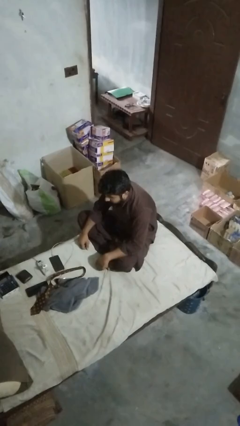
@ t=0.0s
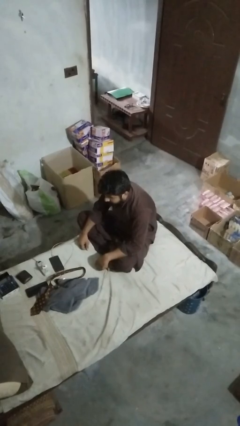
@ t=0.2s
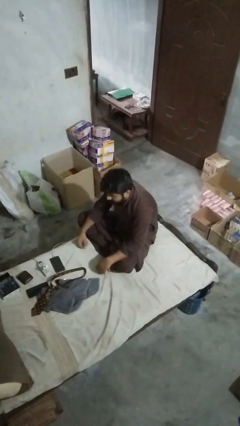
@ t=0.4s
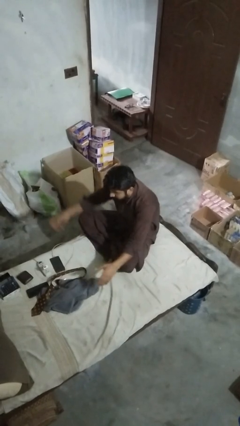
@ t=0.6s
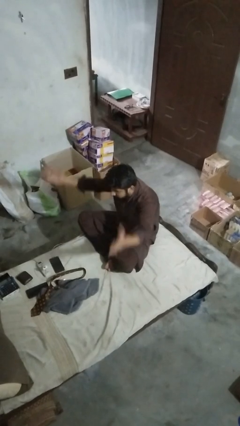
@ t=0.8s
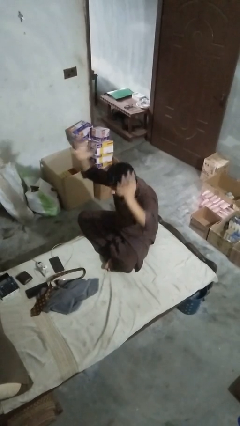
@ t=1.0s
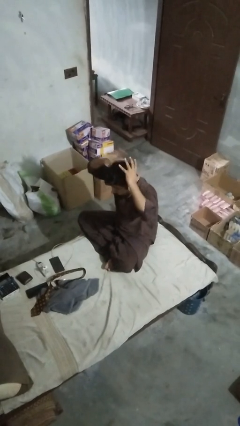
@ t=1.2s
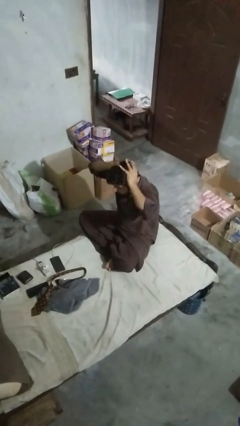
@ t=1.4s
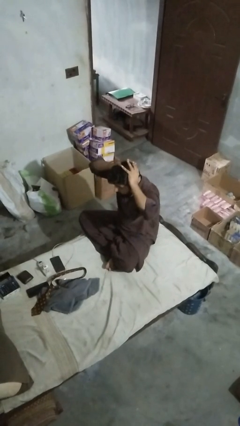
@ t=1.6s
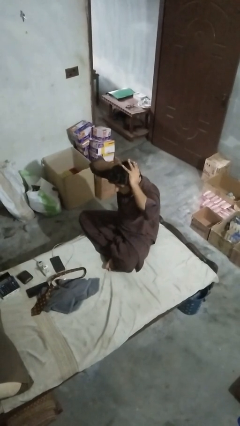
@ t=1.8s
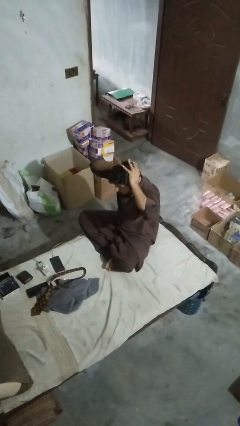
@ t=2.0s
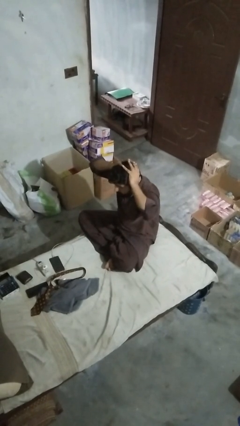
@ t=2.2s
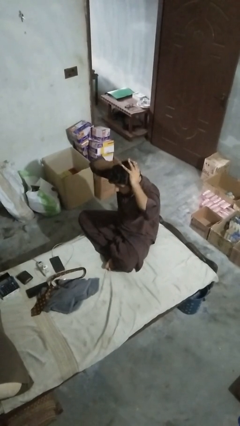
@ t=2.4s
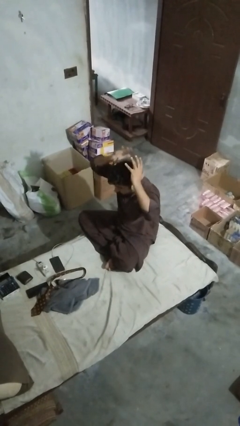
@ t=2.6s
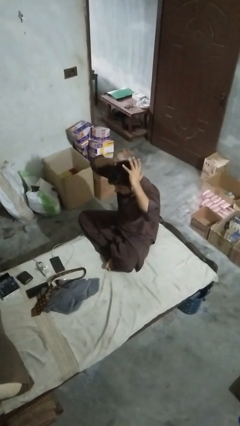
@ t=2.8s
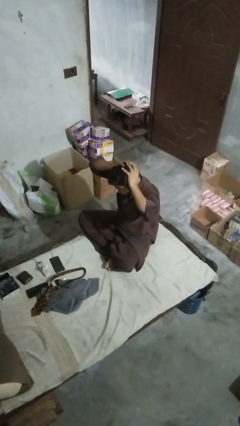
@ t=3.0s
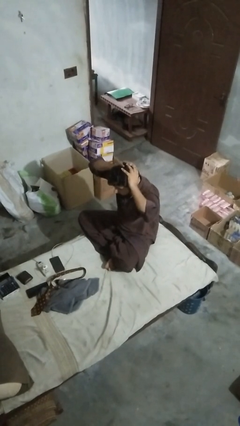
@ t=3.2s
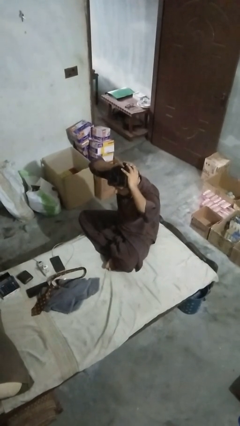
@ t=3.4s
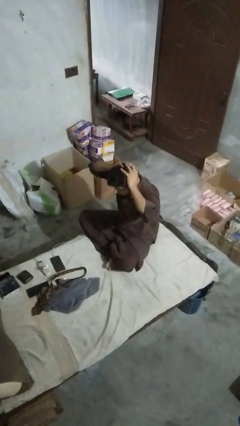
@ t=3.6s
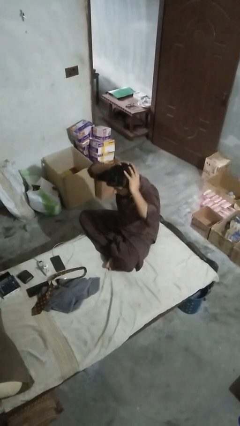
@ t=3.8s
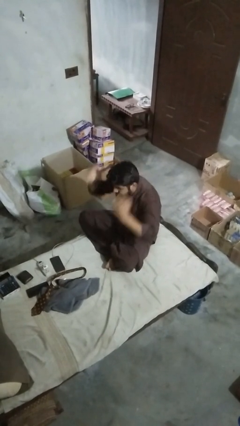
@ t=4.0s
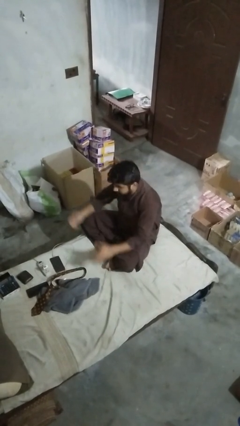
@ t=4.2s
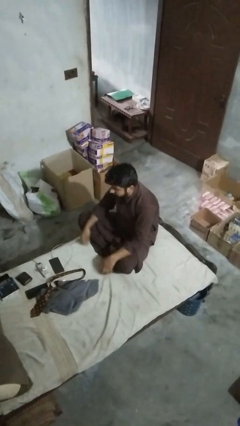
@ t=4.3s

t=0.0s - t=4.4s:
person pats head

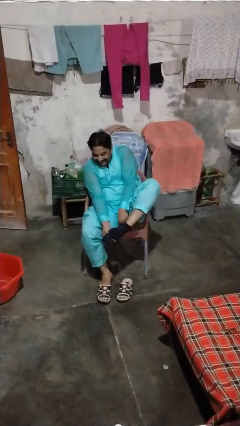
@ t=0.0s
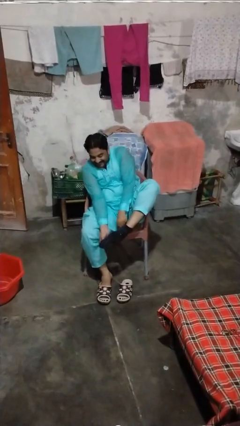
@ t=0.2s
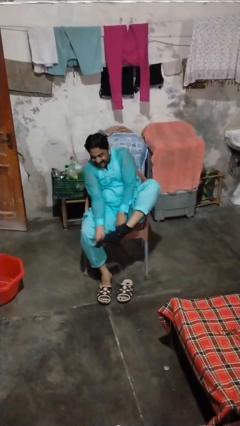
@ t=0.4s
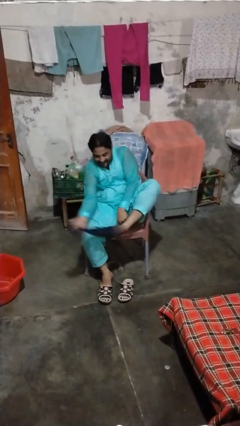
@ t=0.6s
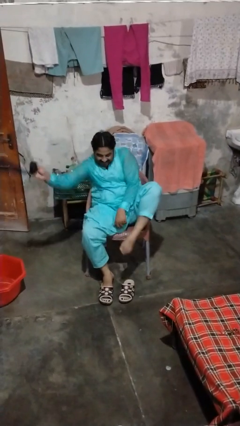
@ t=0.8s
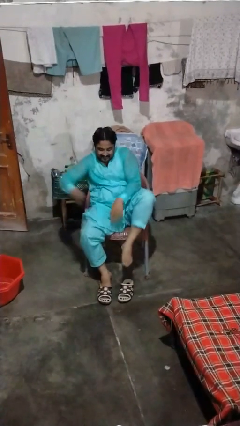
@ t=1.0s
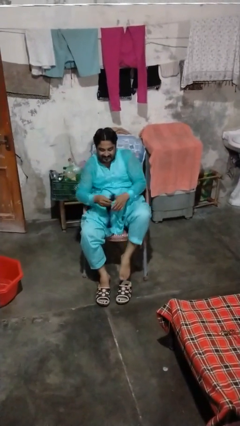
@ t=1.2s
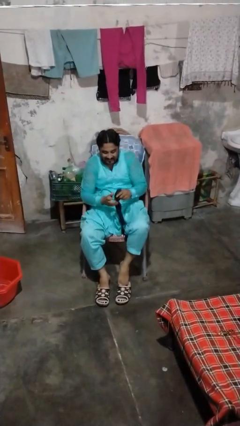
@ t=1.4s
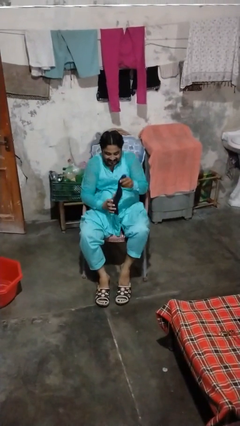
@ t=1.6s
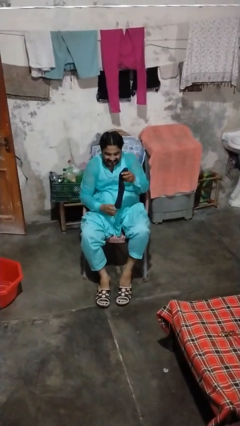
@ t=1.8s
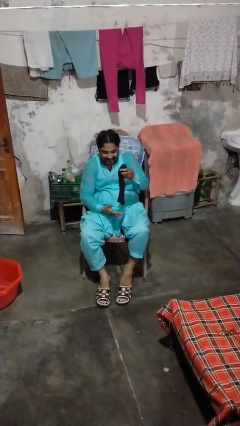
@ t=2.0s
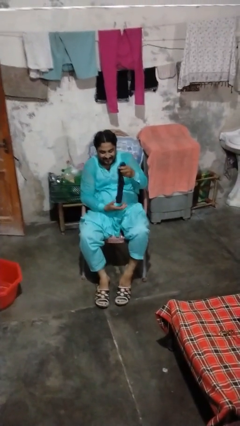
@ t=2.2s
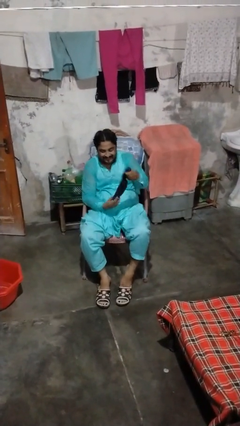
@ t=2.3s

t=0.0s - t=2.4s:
person takes off socks

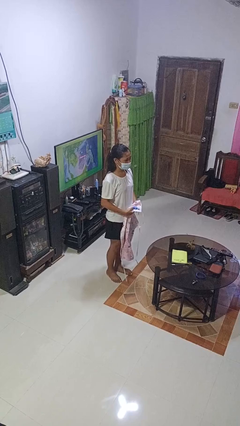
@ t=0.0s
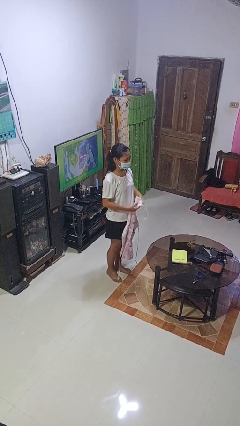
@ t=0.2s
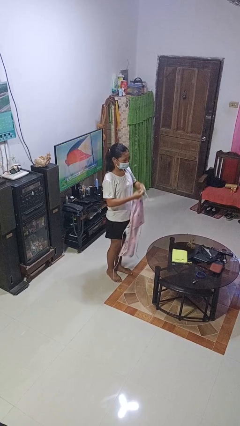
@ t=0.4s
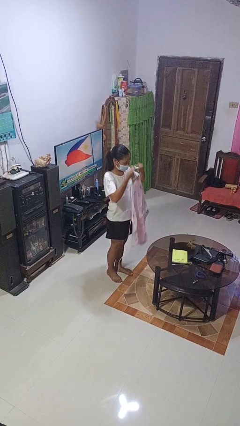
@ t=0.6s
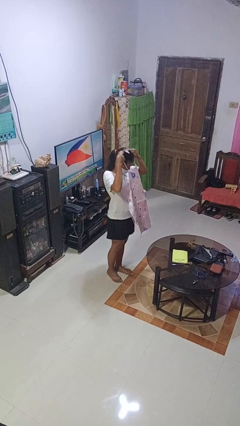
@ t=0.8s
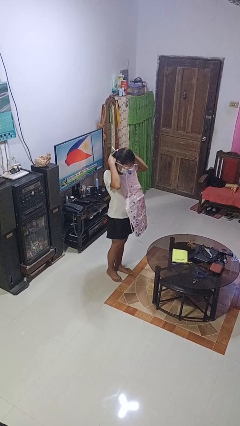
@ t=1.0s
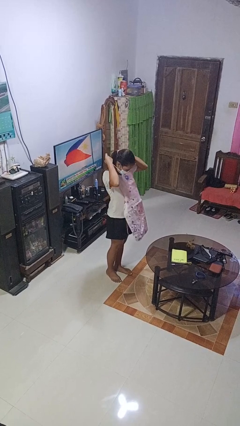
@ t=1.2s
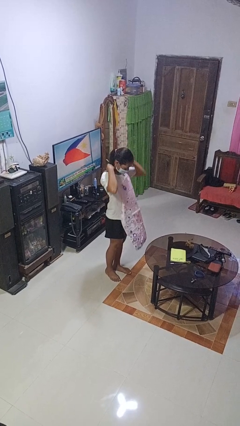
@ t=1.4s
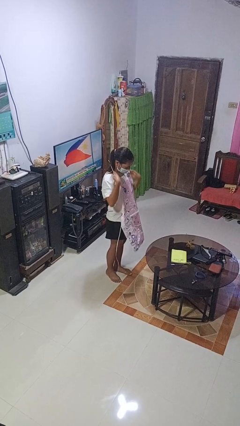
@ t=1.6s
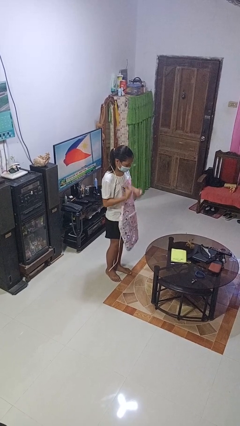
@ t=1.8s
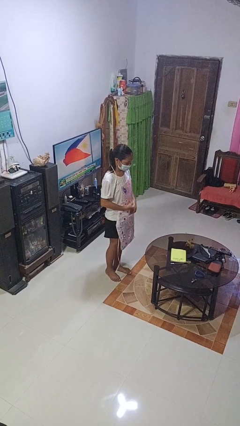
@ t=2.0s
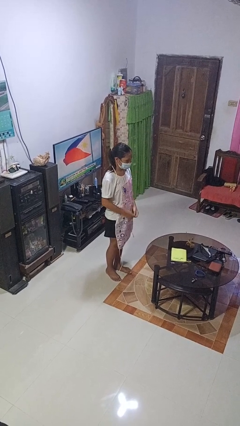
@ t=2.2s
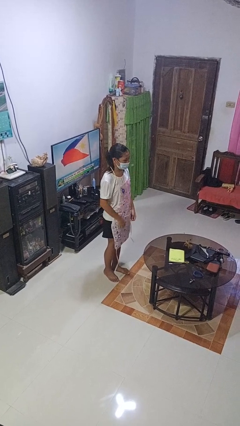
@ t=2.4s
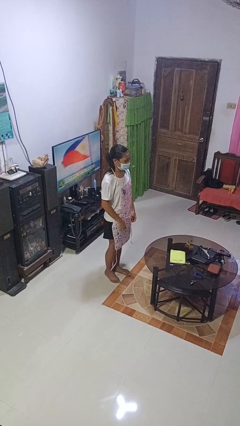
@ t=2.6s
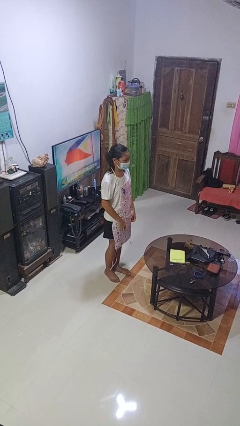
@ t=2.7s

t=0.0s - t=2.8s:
person puts on apron

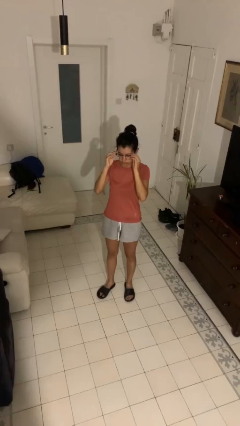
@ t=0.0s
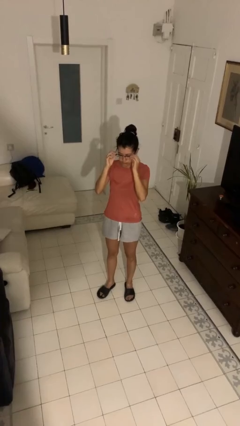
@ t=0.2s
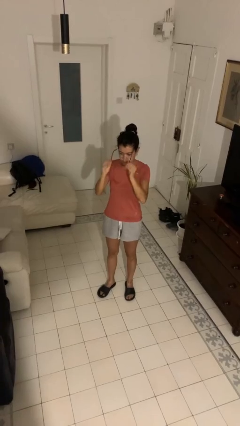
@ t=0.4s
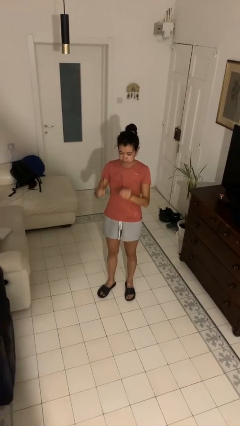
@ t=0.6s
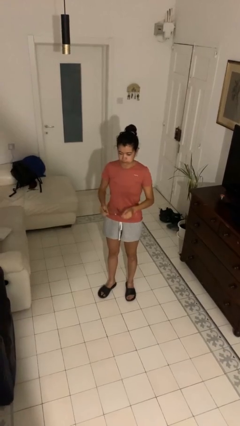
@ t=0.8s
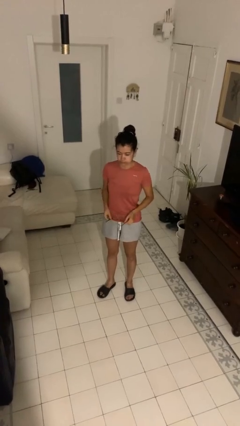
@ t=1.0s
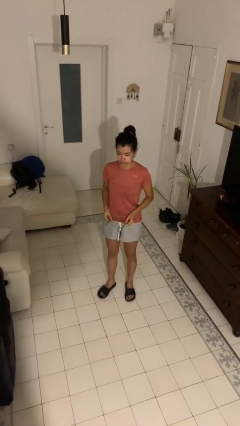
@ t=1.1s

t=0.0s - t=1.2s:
person takes off glasses

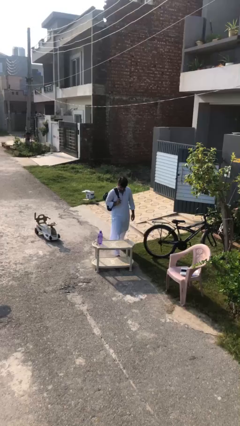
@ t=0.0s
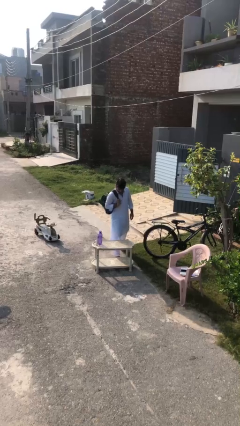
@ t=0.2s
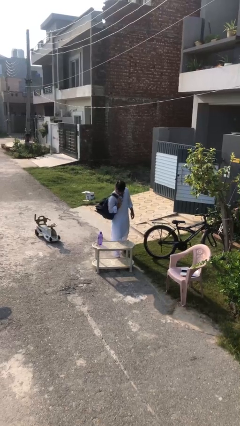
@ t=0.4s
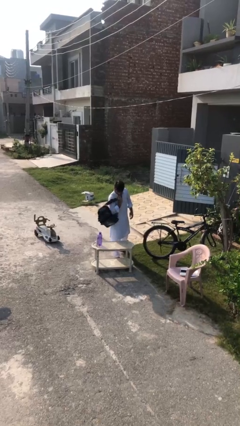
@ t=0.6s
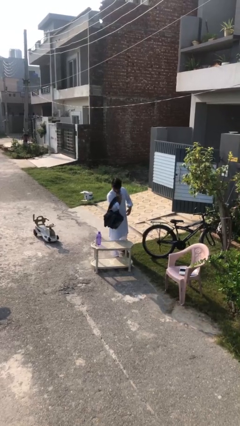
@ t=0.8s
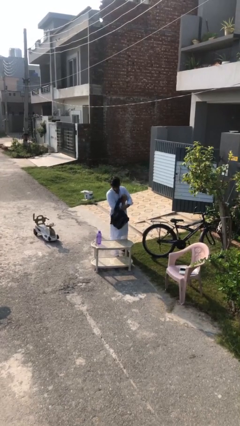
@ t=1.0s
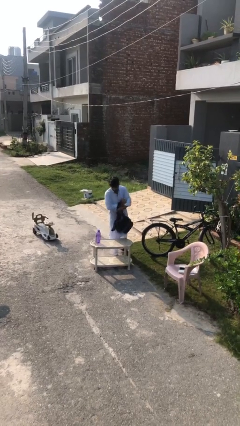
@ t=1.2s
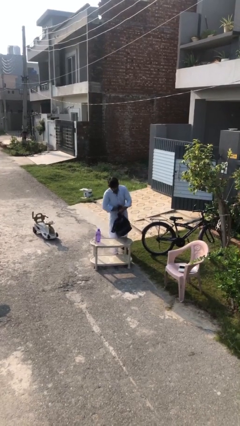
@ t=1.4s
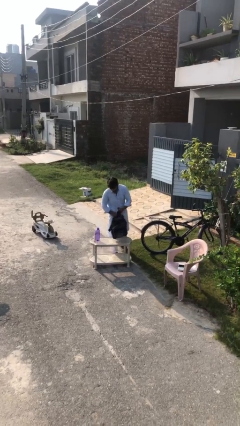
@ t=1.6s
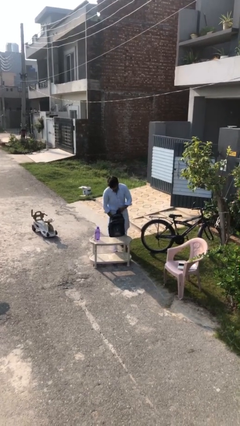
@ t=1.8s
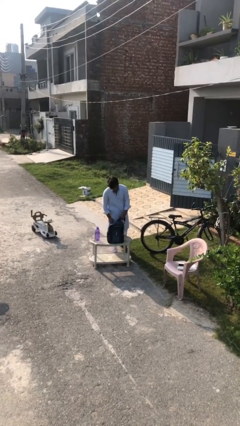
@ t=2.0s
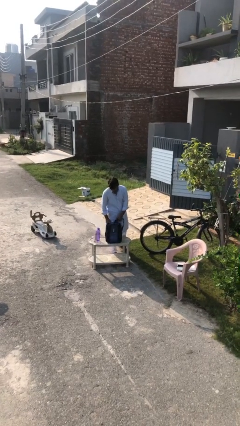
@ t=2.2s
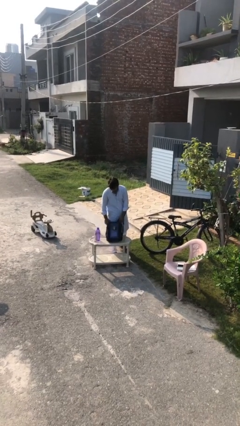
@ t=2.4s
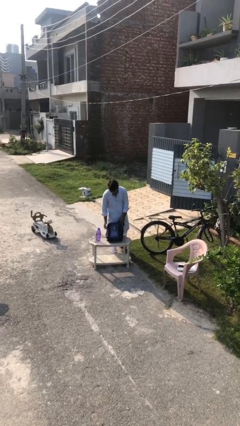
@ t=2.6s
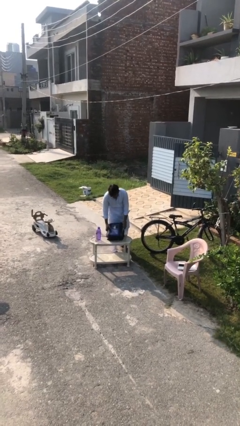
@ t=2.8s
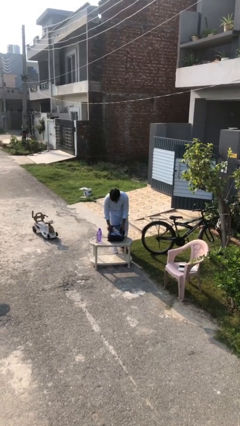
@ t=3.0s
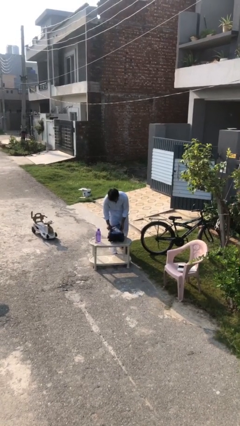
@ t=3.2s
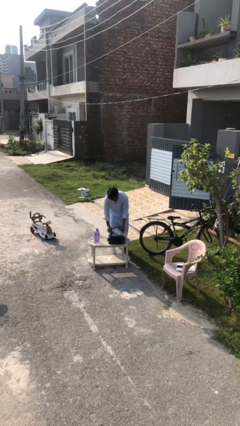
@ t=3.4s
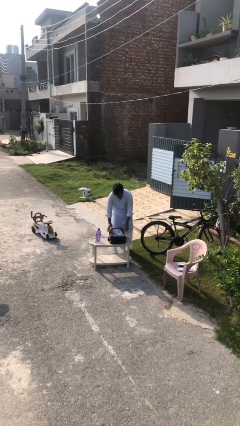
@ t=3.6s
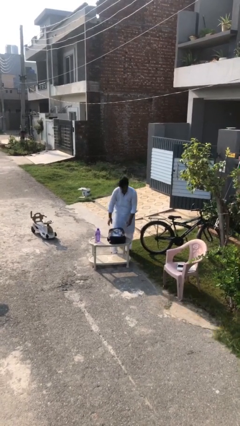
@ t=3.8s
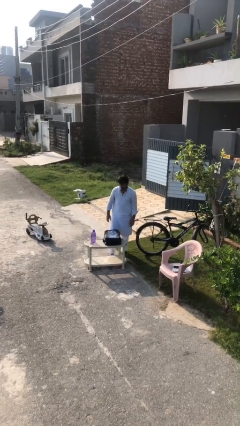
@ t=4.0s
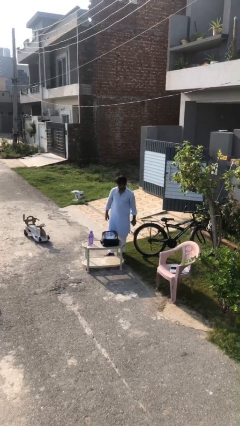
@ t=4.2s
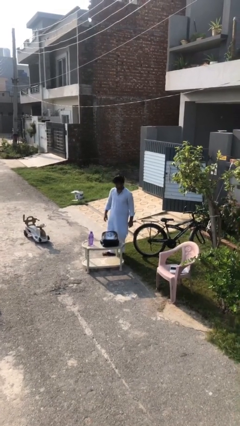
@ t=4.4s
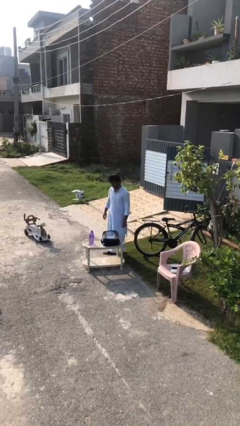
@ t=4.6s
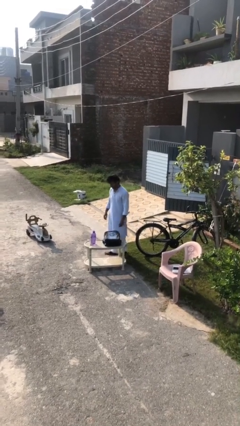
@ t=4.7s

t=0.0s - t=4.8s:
person puts down object on table

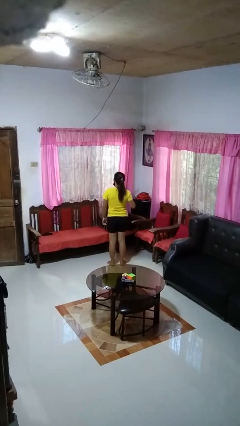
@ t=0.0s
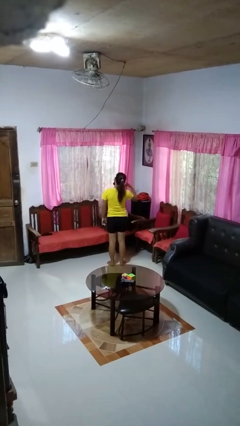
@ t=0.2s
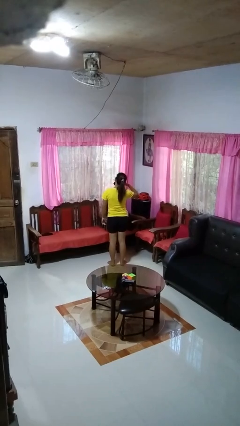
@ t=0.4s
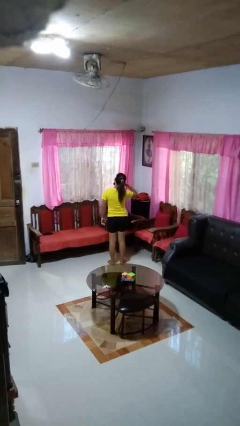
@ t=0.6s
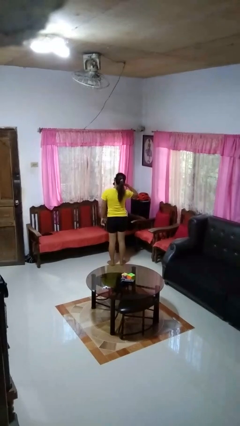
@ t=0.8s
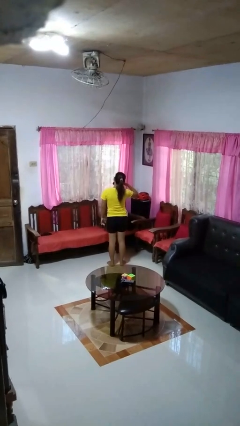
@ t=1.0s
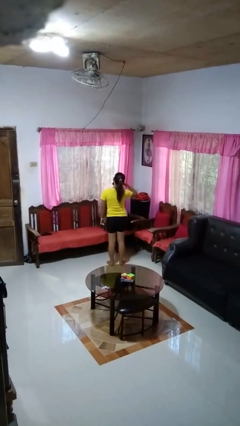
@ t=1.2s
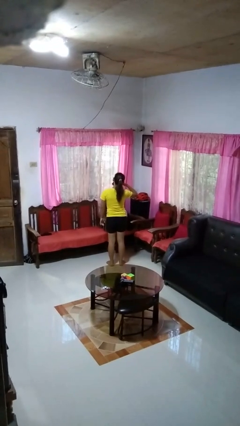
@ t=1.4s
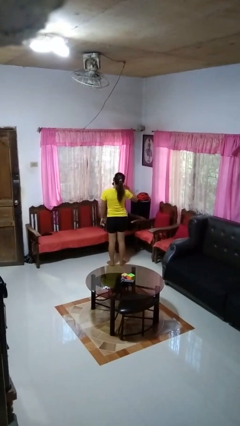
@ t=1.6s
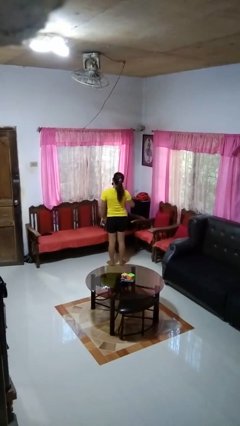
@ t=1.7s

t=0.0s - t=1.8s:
person gestures call me
